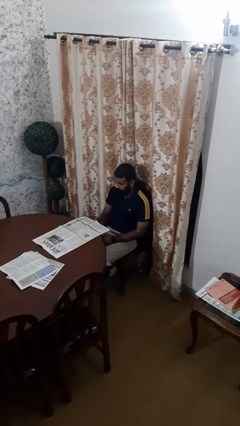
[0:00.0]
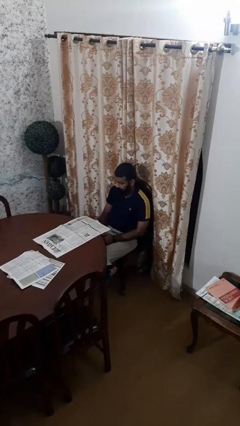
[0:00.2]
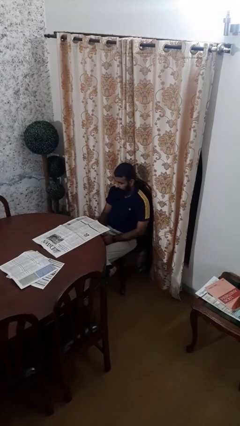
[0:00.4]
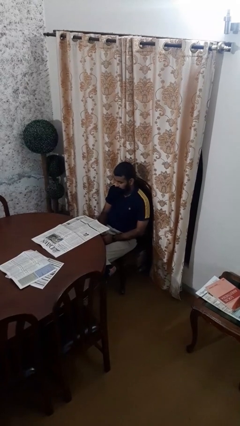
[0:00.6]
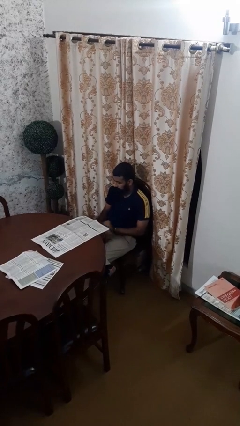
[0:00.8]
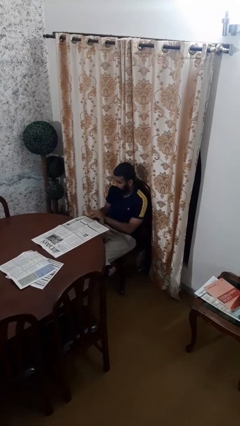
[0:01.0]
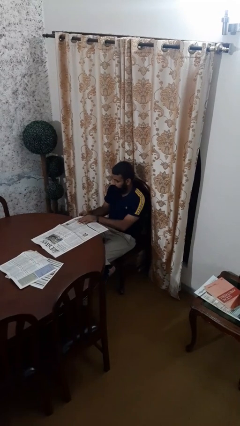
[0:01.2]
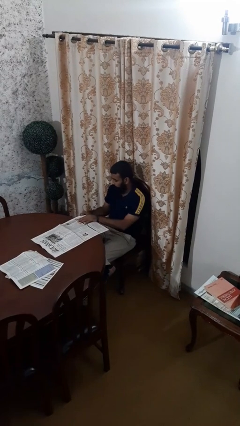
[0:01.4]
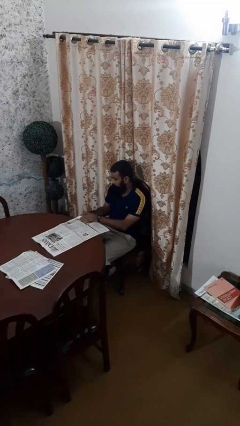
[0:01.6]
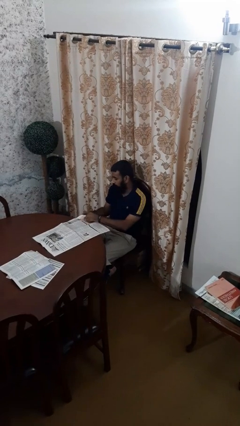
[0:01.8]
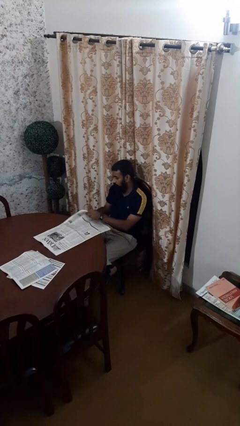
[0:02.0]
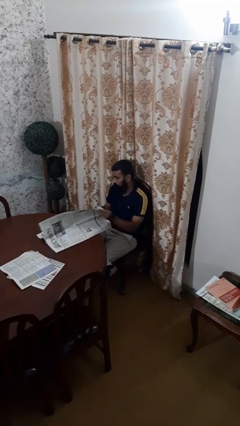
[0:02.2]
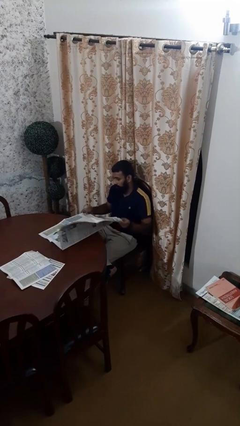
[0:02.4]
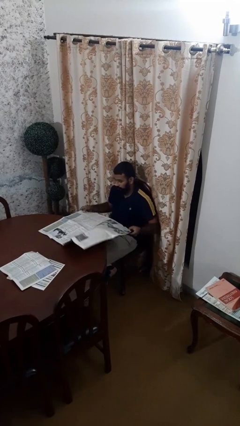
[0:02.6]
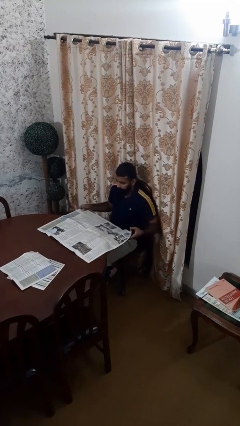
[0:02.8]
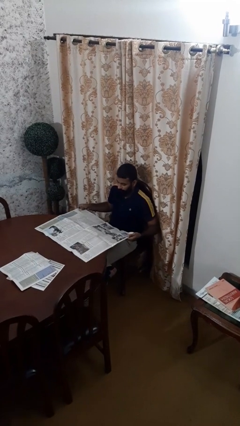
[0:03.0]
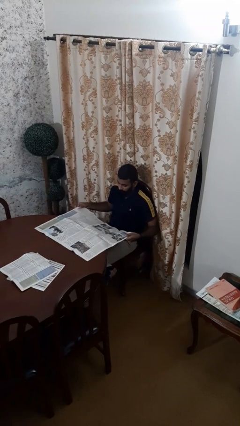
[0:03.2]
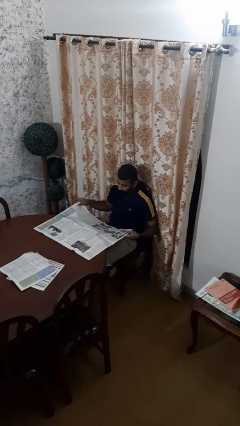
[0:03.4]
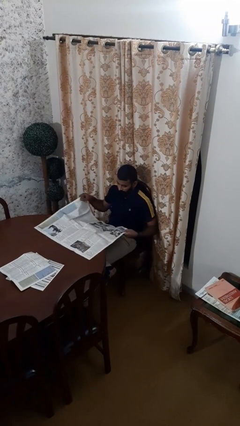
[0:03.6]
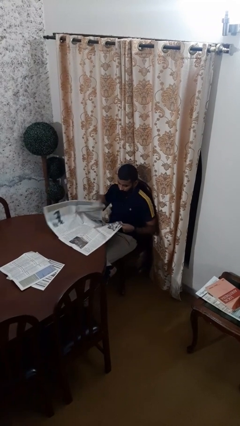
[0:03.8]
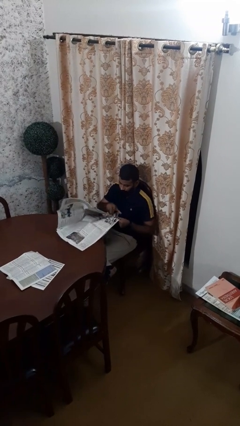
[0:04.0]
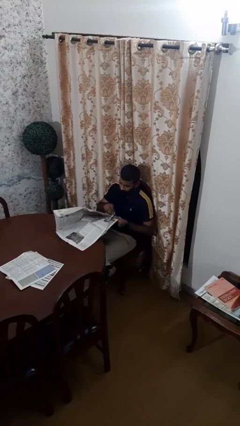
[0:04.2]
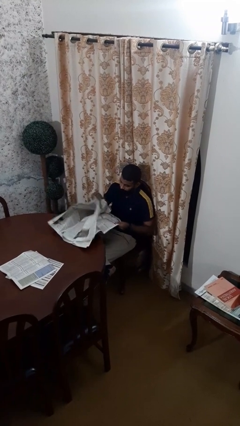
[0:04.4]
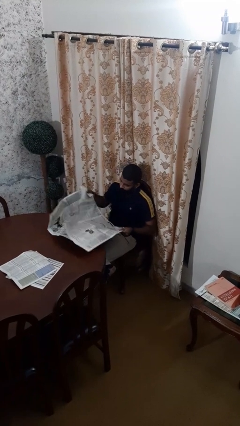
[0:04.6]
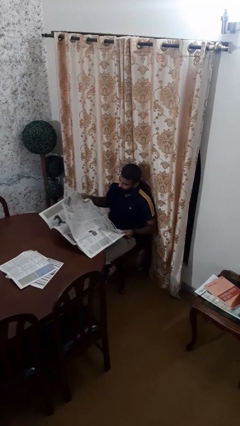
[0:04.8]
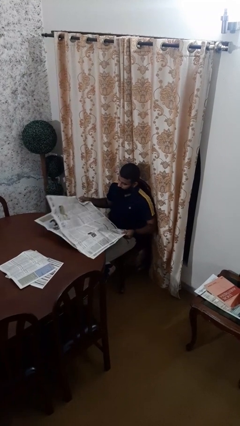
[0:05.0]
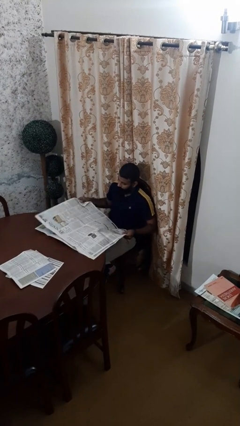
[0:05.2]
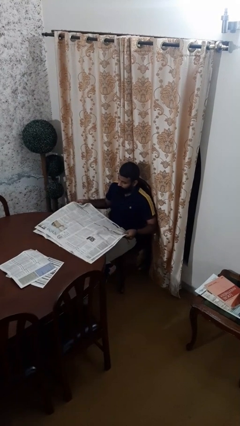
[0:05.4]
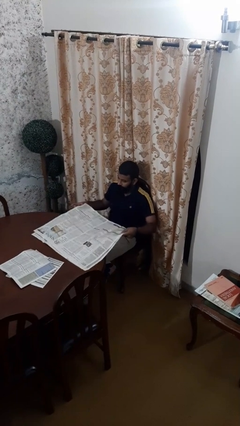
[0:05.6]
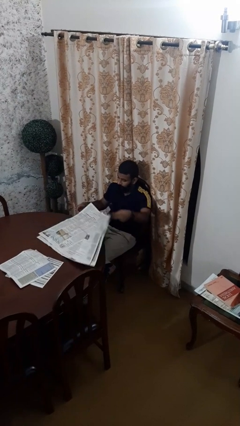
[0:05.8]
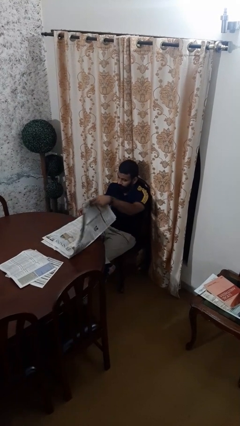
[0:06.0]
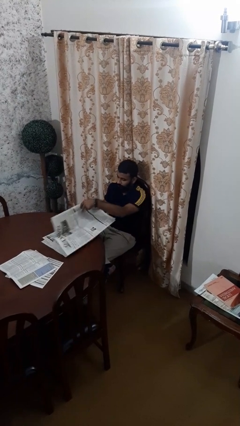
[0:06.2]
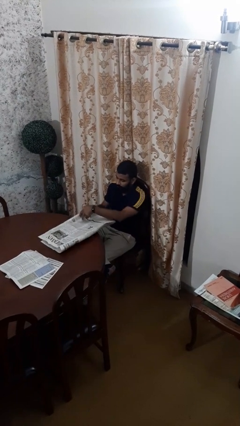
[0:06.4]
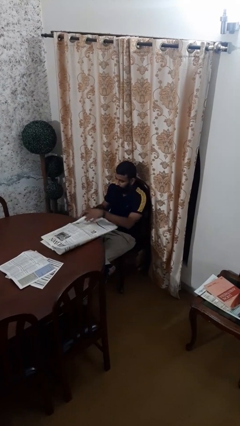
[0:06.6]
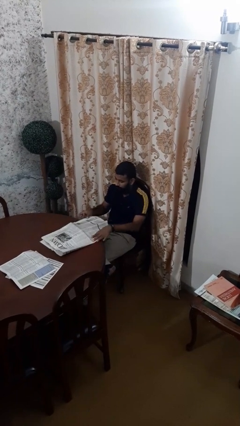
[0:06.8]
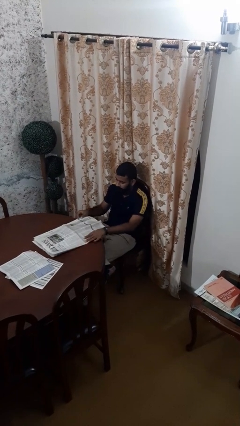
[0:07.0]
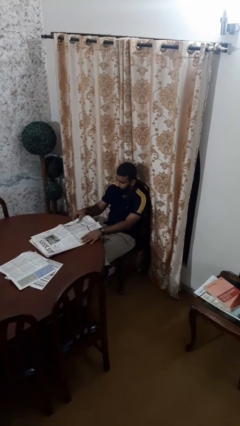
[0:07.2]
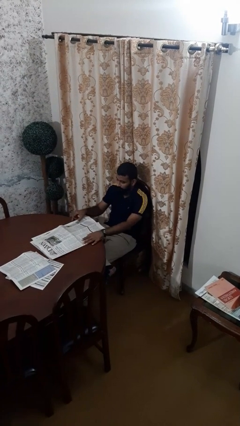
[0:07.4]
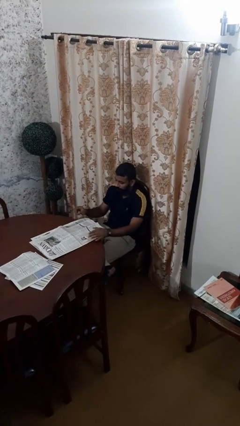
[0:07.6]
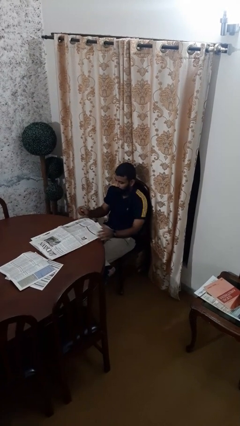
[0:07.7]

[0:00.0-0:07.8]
person reads newspaper

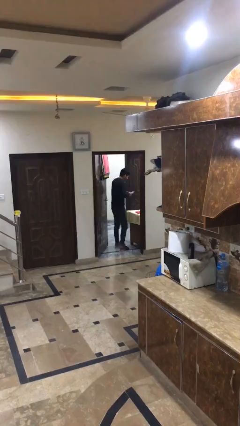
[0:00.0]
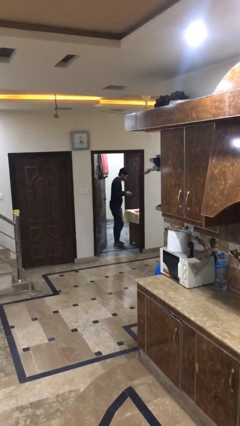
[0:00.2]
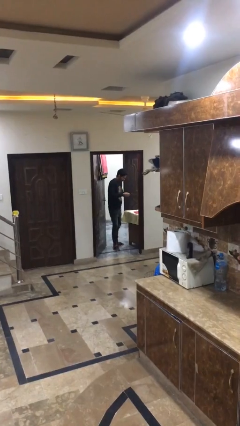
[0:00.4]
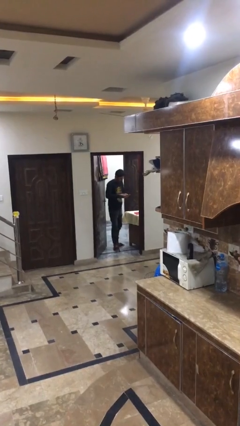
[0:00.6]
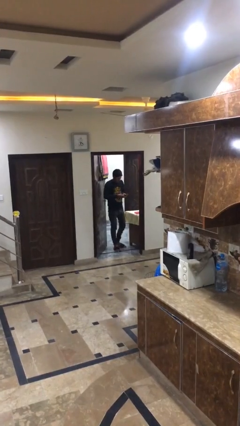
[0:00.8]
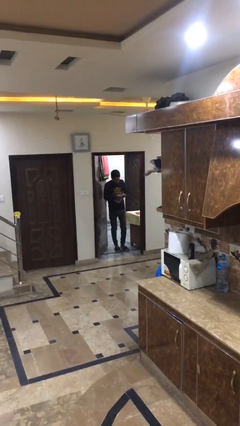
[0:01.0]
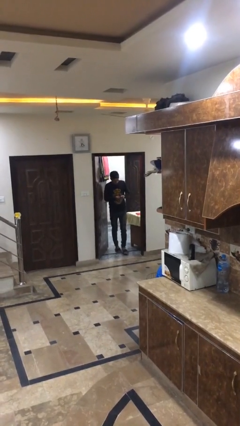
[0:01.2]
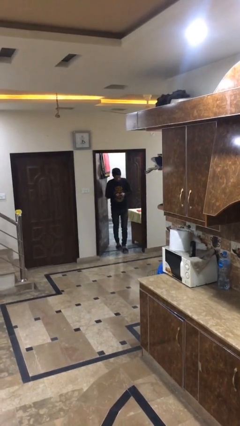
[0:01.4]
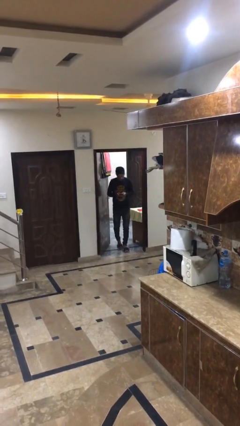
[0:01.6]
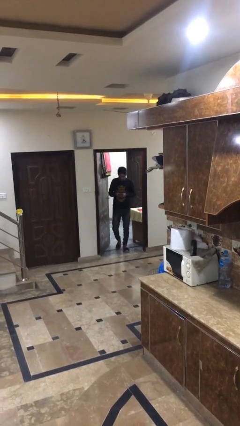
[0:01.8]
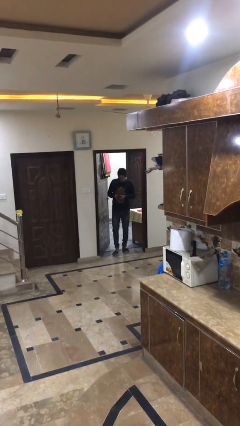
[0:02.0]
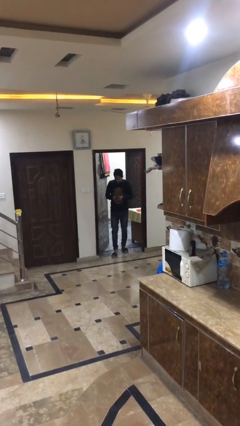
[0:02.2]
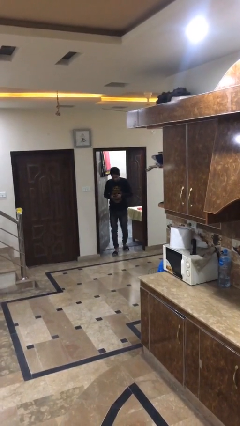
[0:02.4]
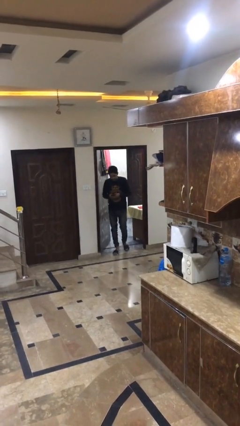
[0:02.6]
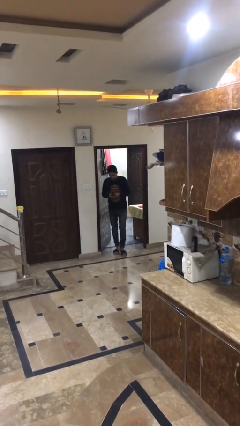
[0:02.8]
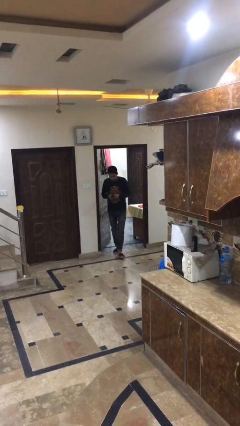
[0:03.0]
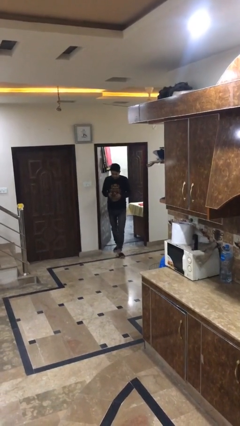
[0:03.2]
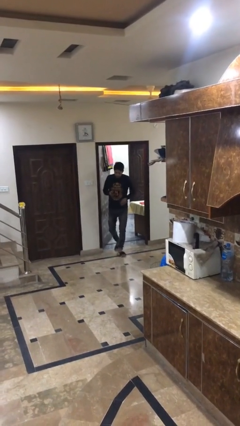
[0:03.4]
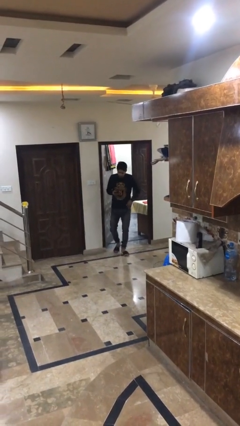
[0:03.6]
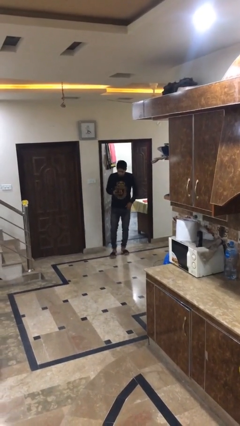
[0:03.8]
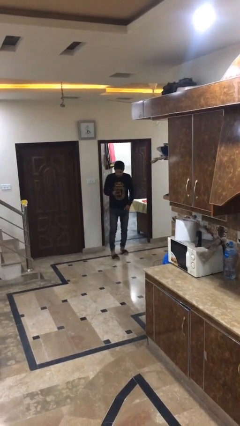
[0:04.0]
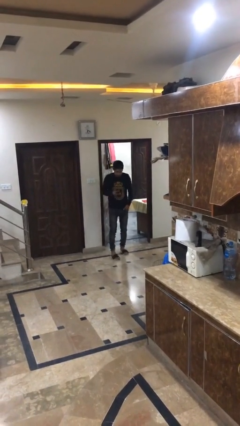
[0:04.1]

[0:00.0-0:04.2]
person exits scene through structure

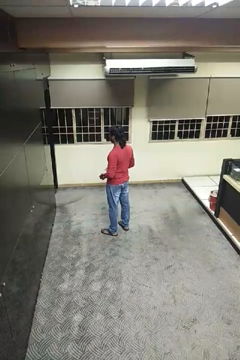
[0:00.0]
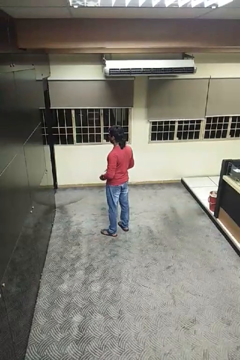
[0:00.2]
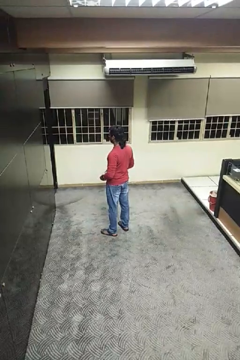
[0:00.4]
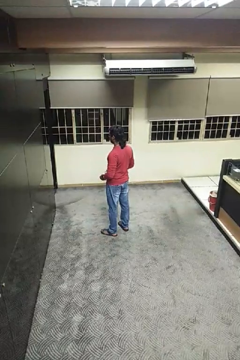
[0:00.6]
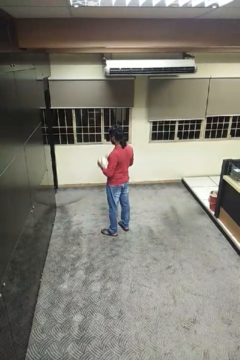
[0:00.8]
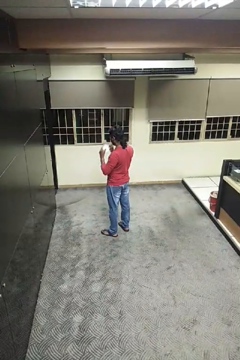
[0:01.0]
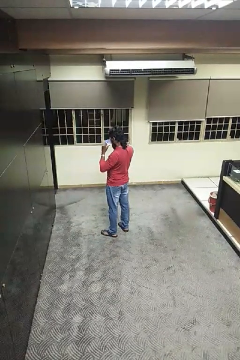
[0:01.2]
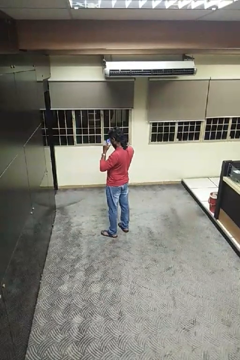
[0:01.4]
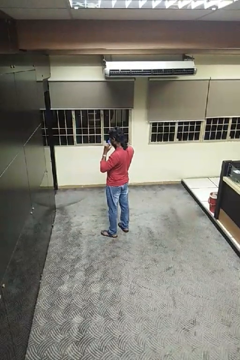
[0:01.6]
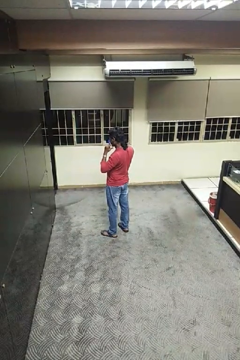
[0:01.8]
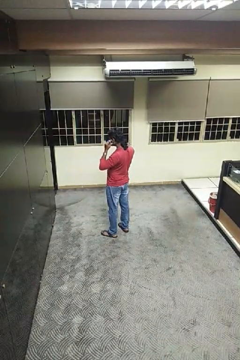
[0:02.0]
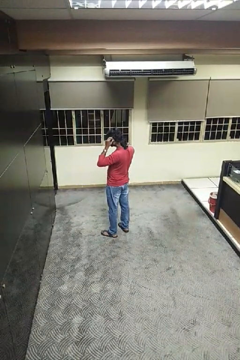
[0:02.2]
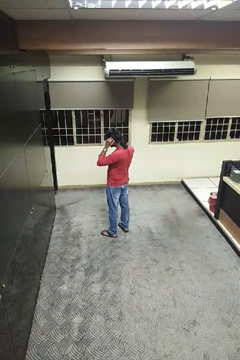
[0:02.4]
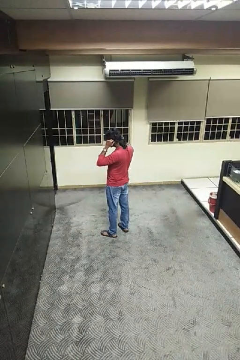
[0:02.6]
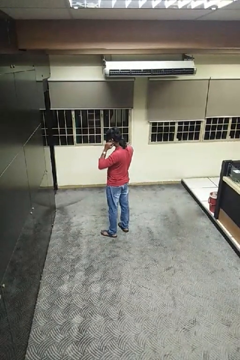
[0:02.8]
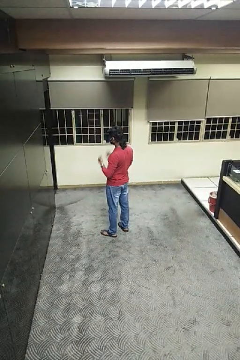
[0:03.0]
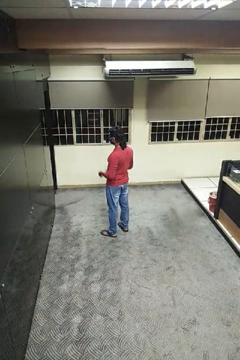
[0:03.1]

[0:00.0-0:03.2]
person puts on facemask

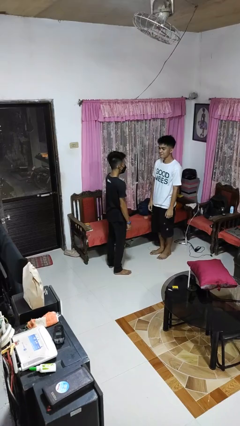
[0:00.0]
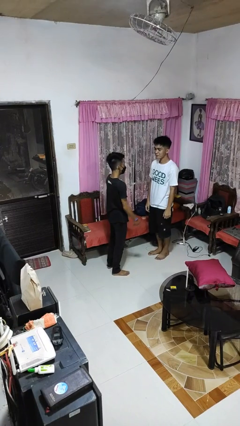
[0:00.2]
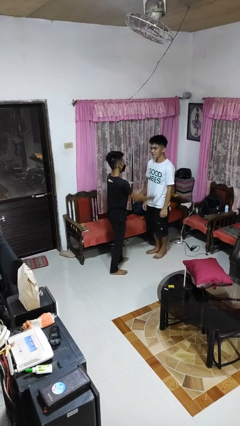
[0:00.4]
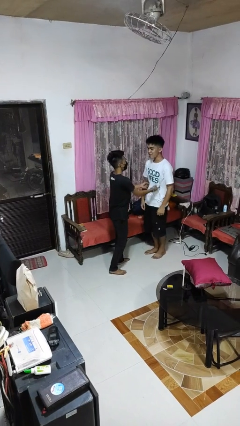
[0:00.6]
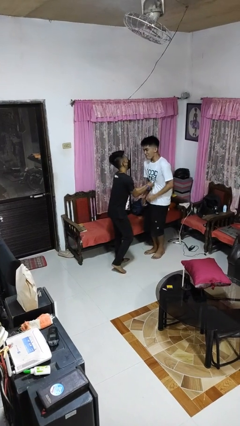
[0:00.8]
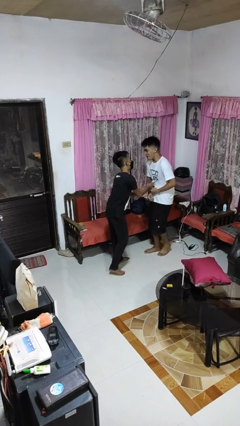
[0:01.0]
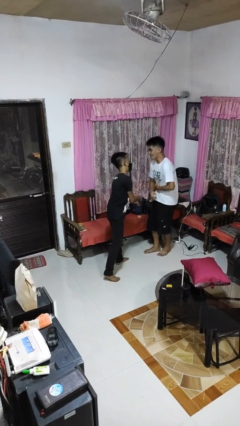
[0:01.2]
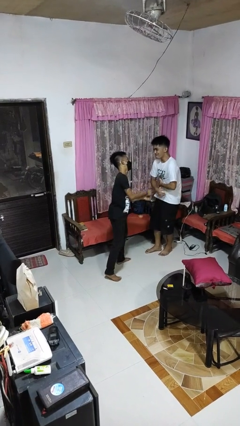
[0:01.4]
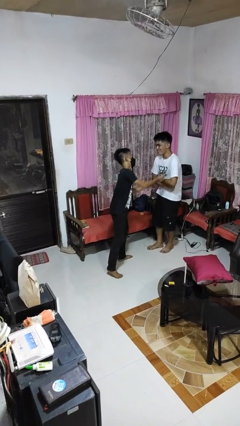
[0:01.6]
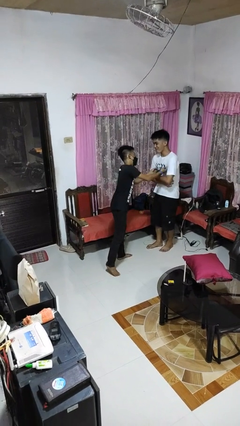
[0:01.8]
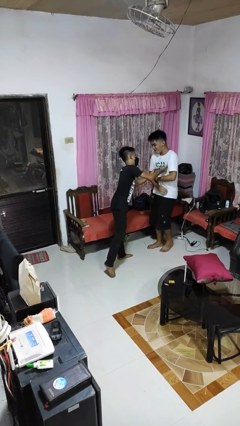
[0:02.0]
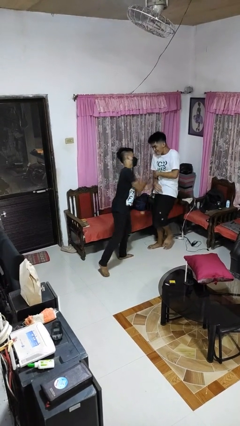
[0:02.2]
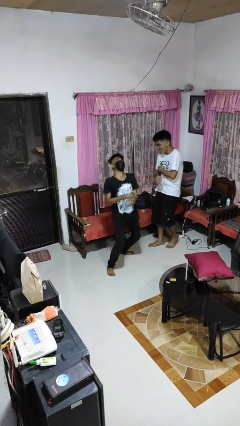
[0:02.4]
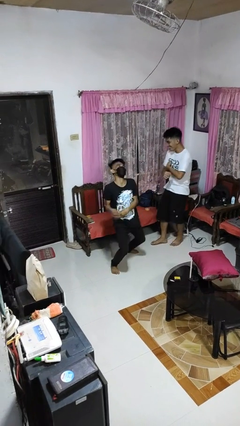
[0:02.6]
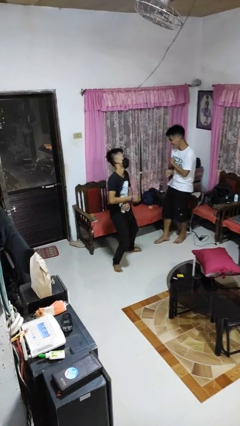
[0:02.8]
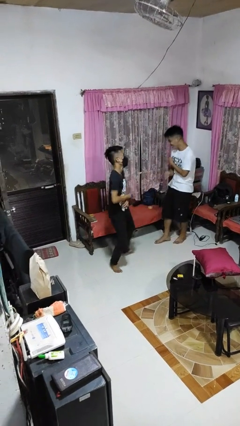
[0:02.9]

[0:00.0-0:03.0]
person tickles person
